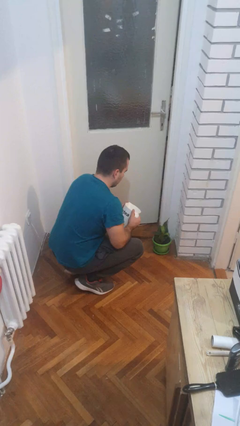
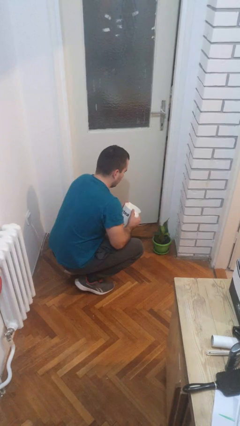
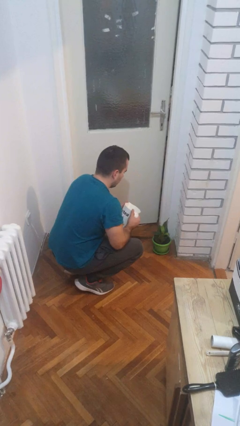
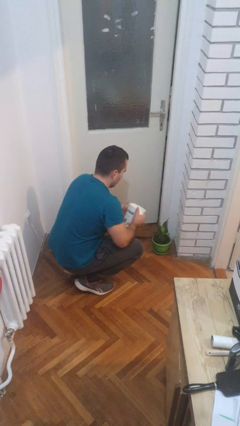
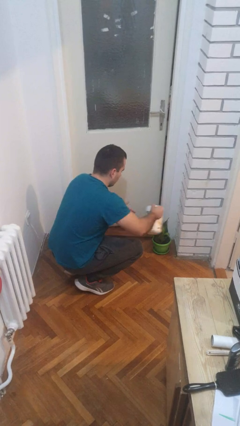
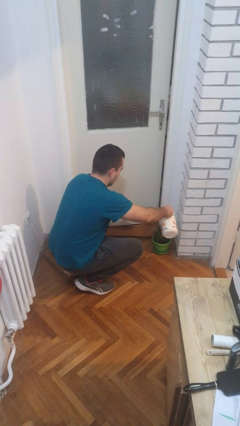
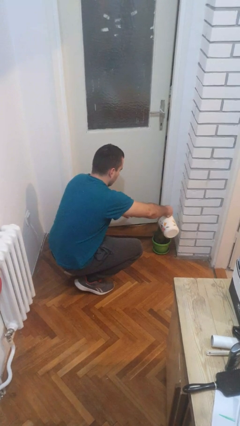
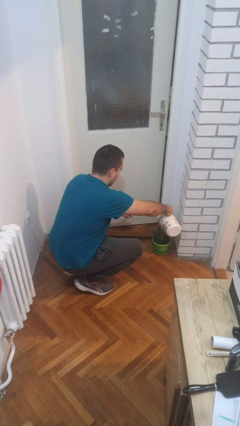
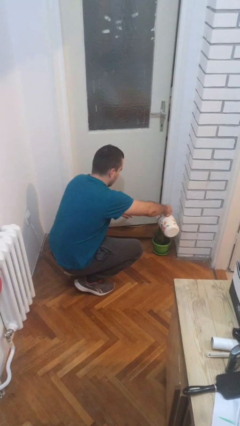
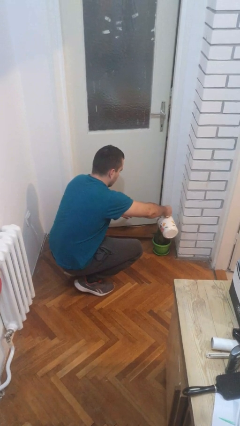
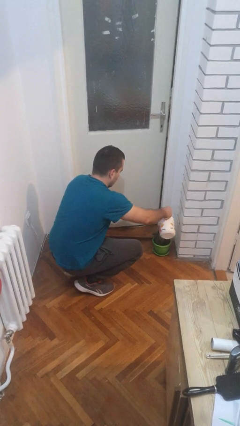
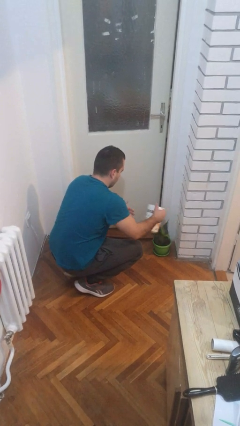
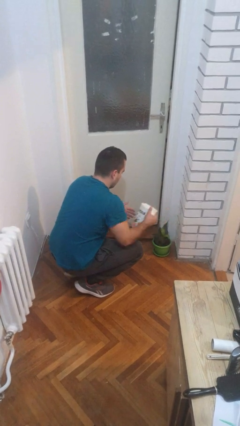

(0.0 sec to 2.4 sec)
person waters houseplant

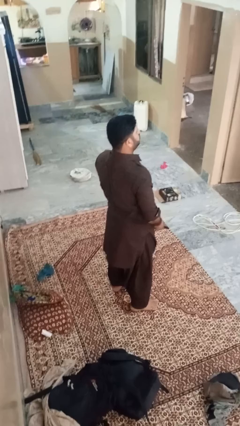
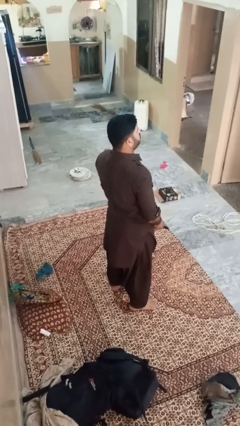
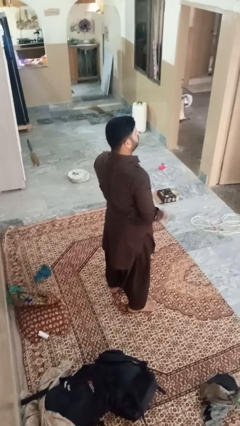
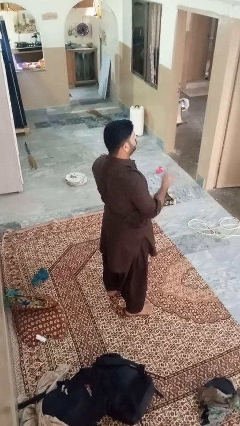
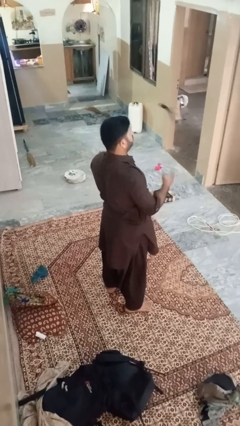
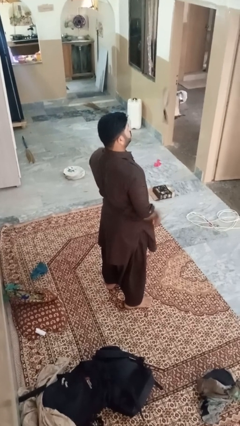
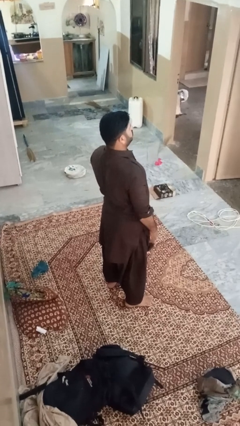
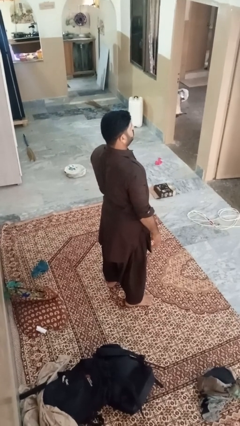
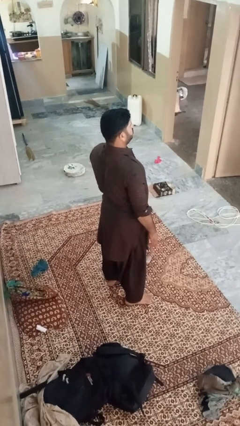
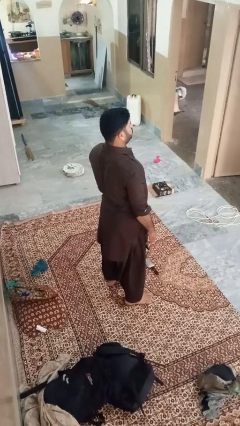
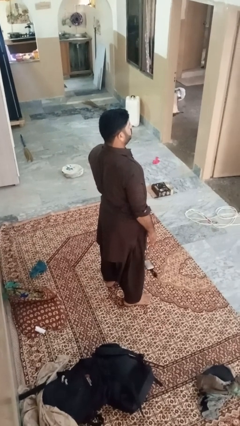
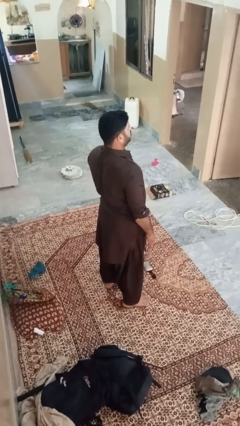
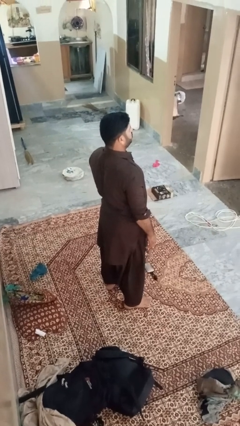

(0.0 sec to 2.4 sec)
person throws object into air

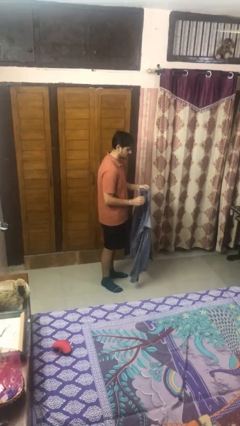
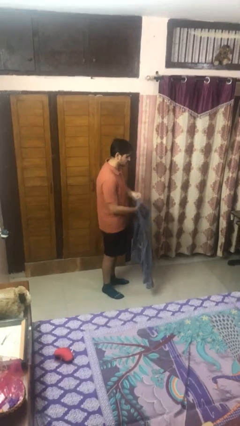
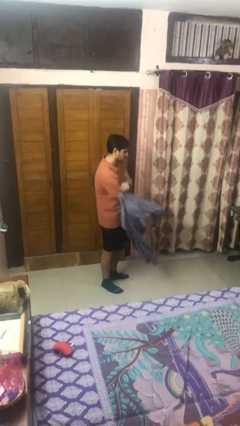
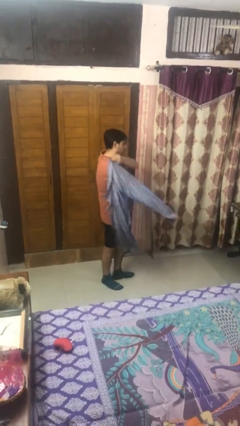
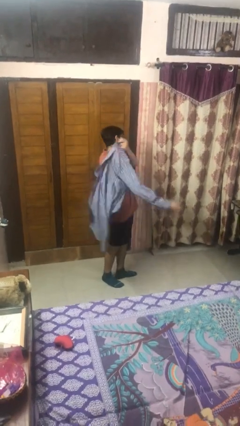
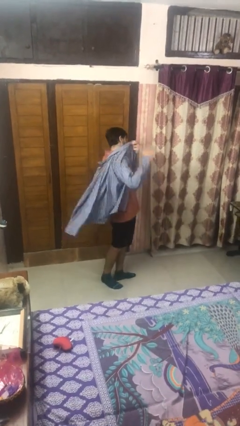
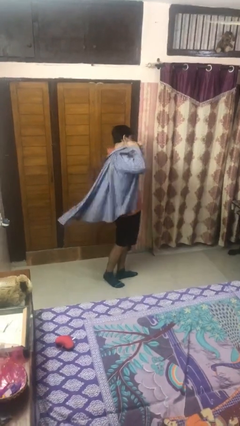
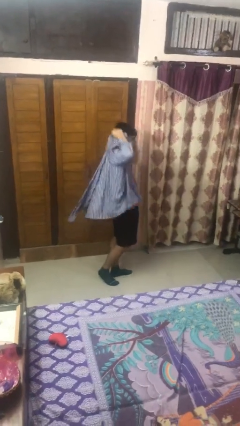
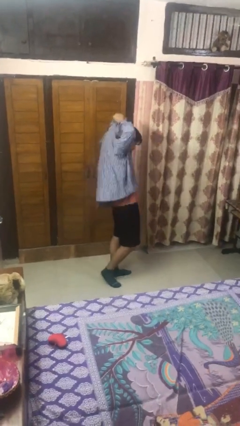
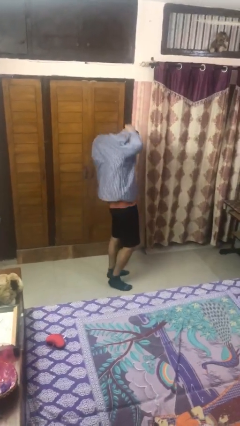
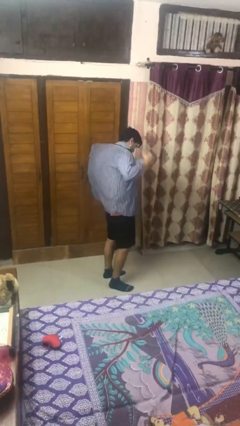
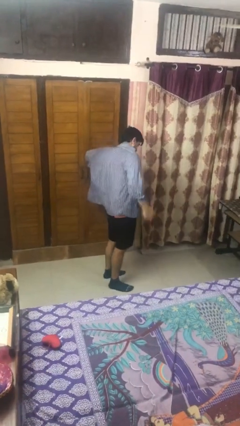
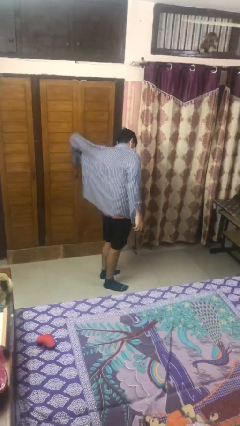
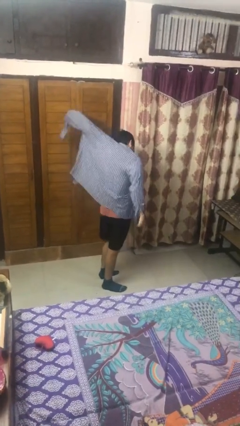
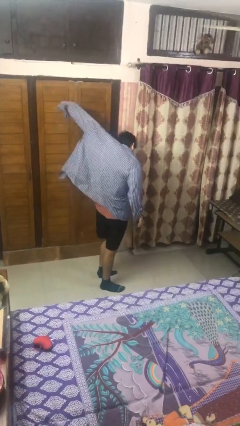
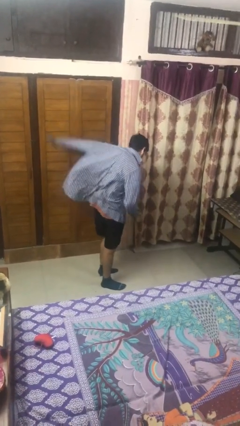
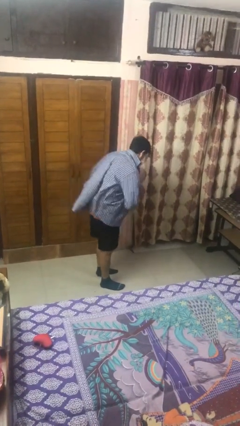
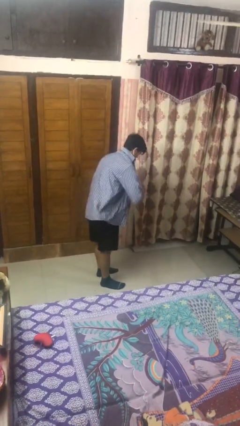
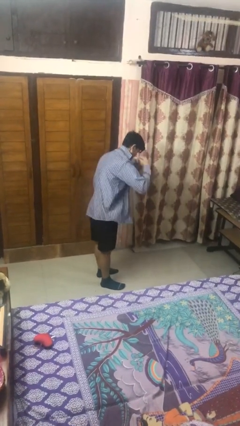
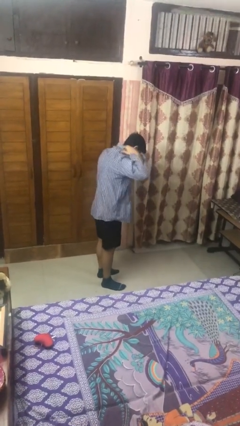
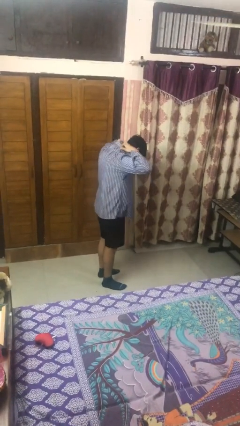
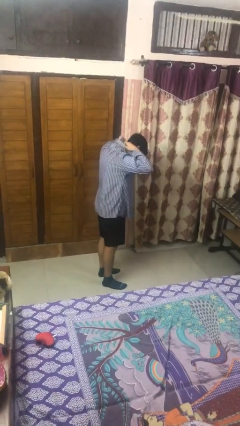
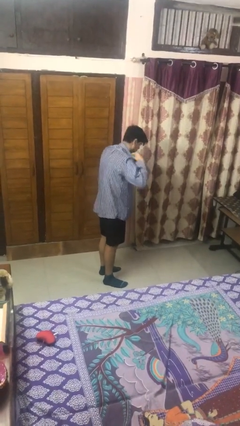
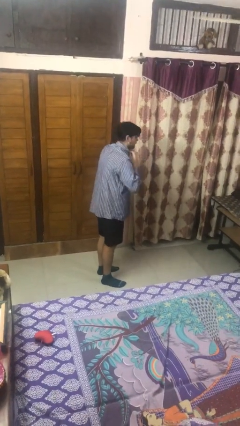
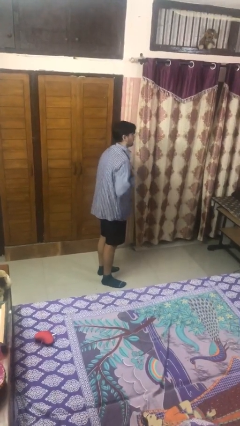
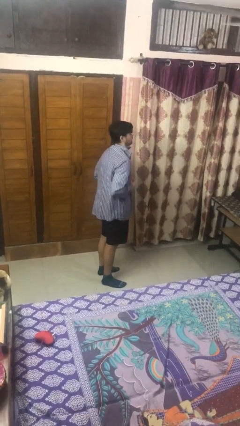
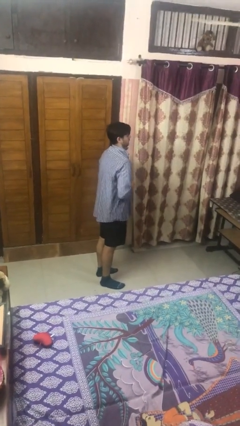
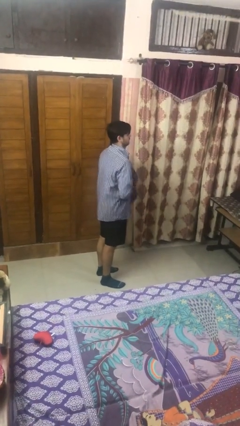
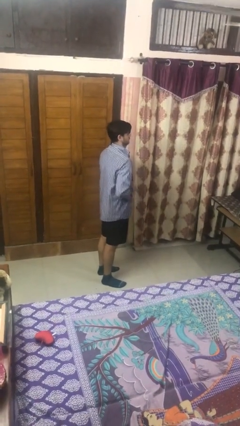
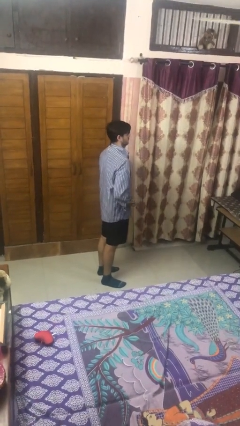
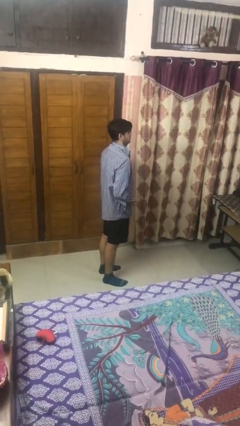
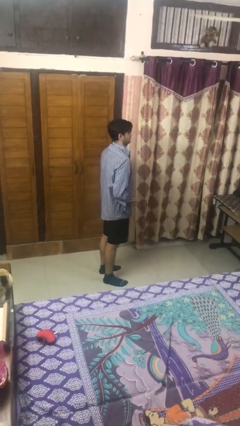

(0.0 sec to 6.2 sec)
person puts on shirt

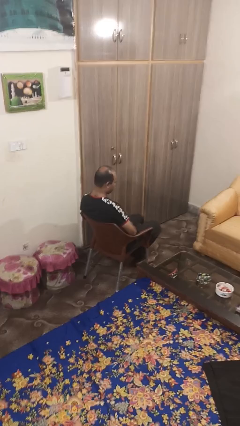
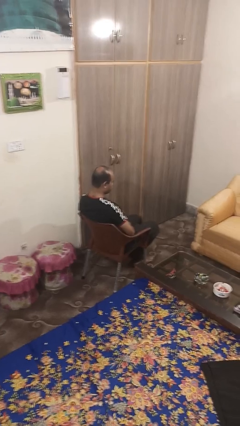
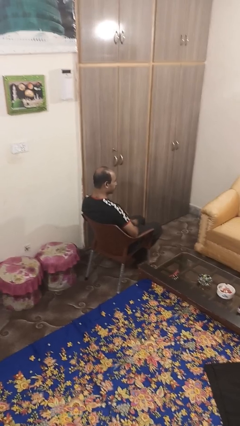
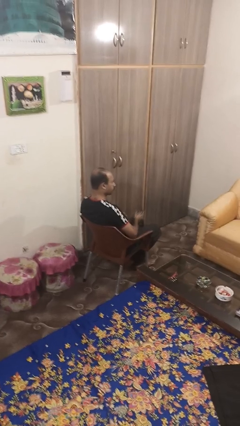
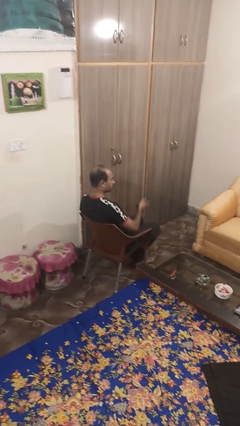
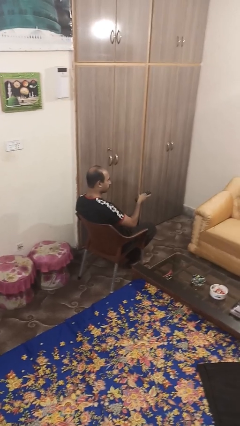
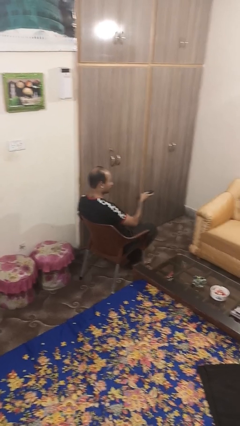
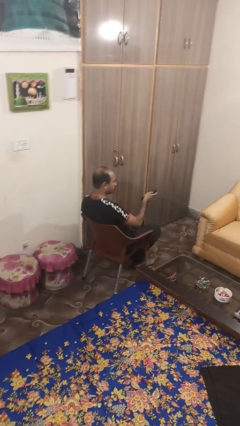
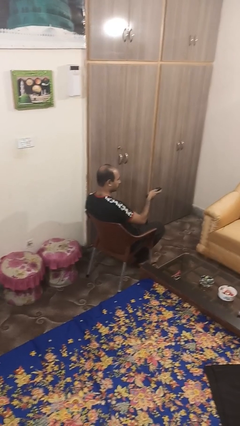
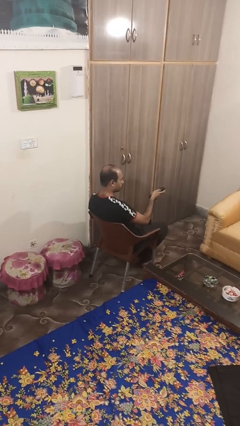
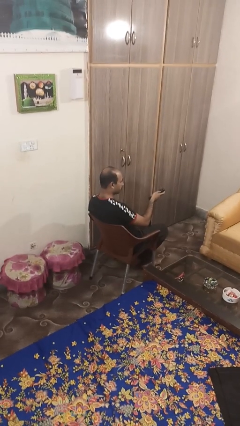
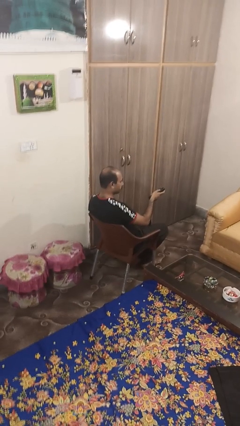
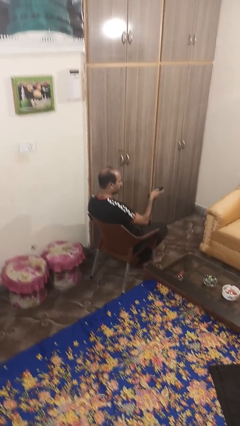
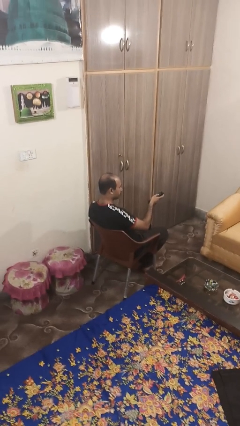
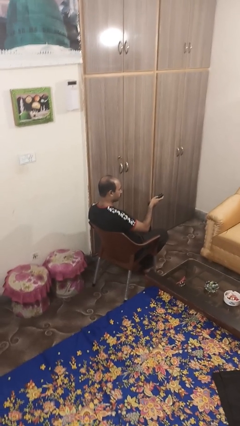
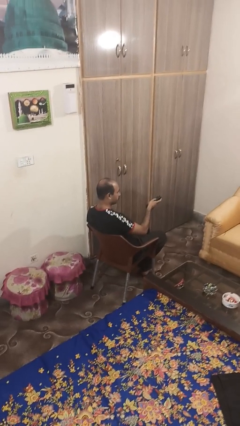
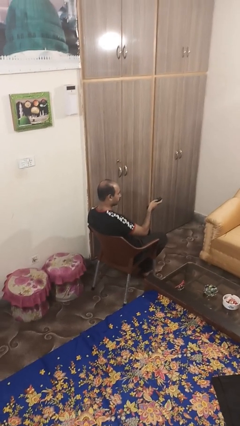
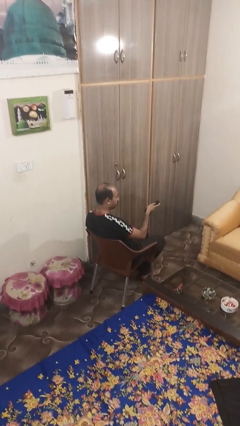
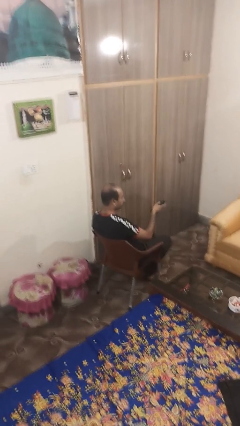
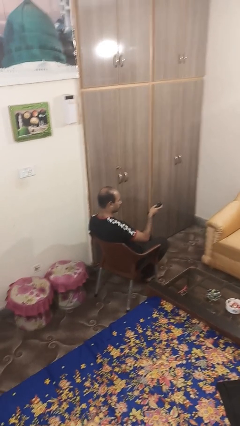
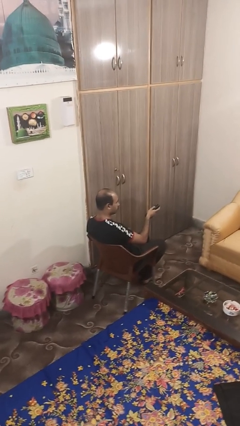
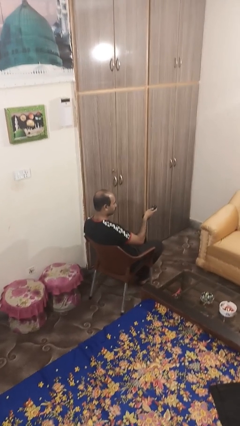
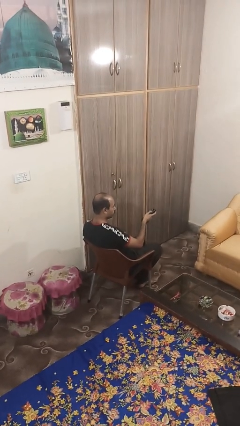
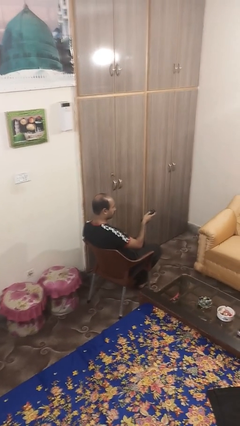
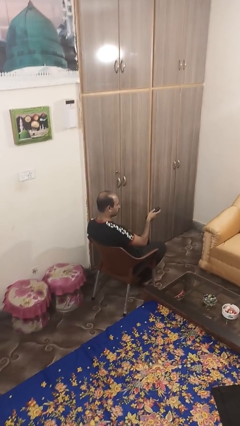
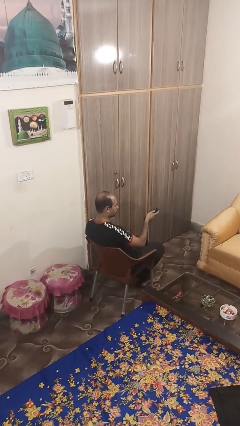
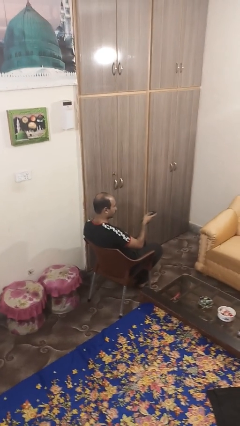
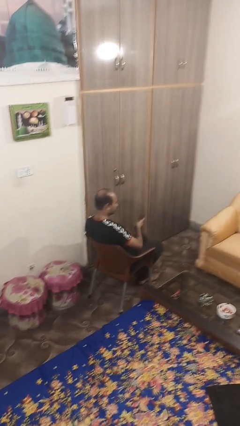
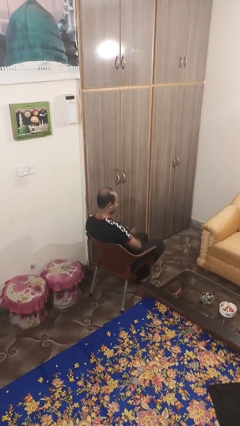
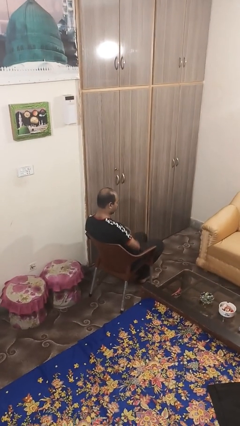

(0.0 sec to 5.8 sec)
person uses television remote

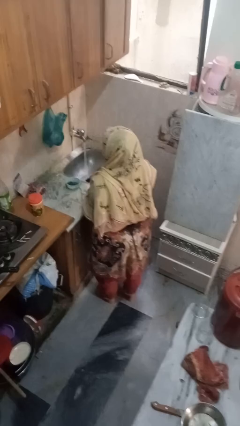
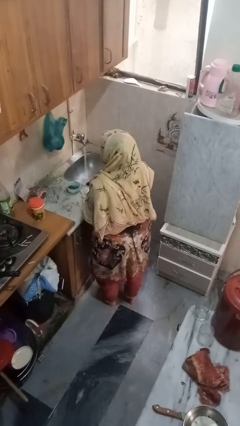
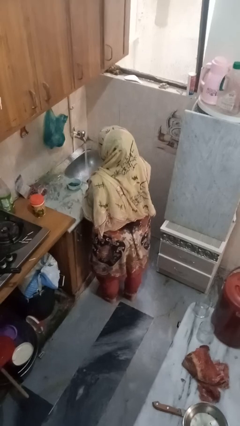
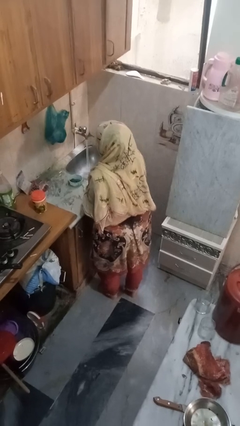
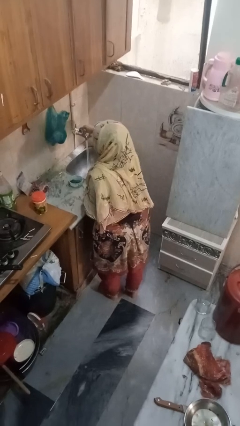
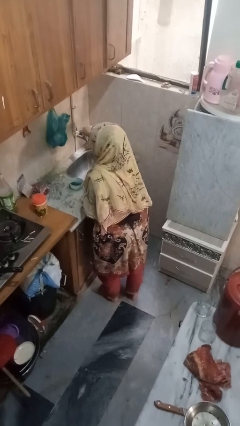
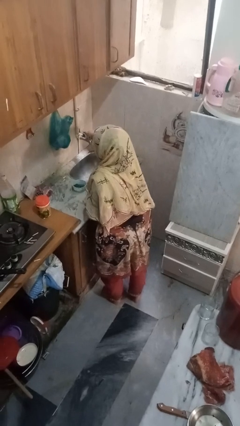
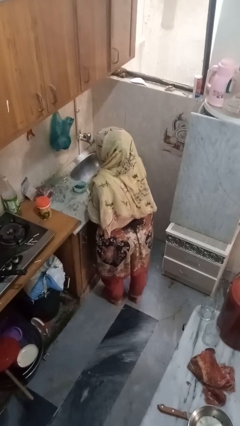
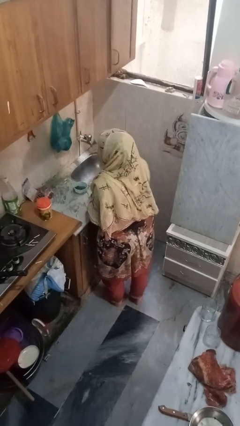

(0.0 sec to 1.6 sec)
person turns off faucet
